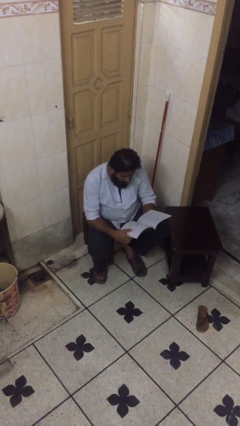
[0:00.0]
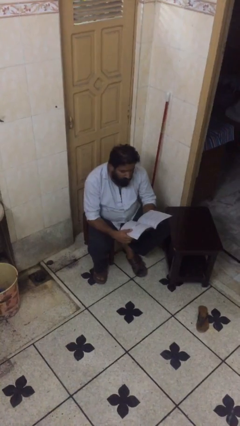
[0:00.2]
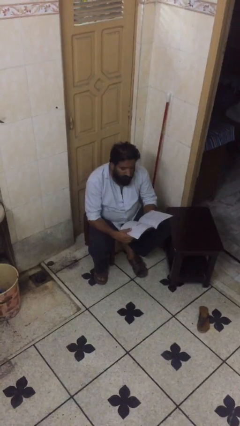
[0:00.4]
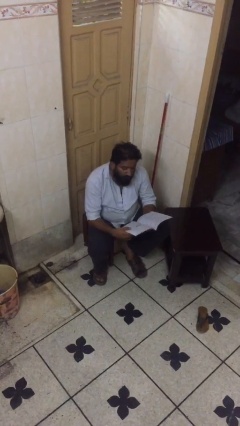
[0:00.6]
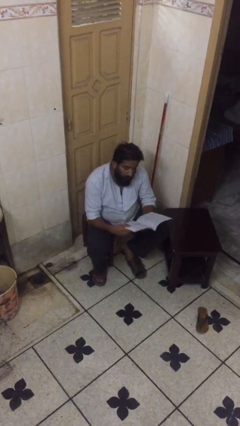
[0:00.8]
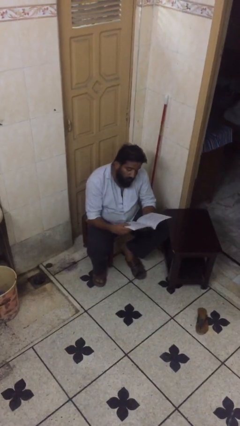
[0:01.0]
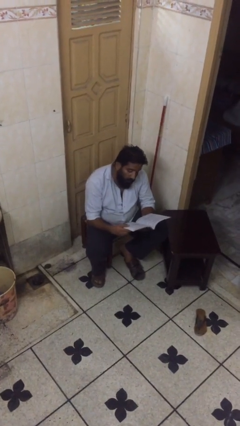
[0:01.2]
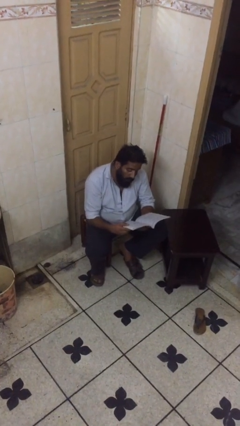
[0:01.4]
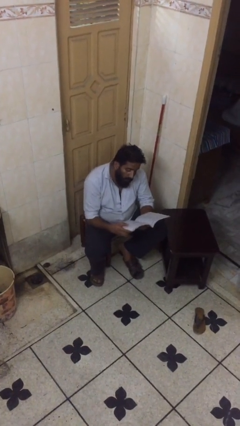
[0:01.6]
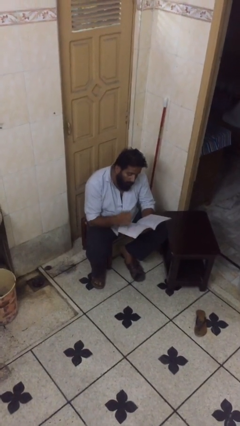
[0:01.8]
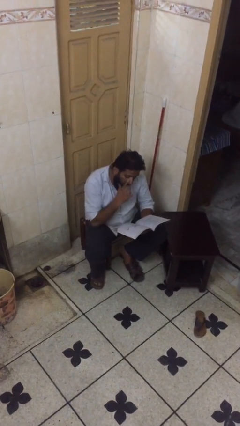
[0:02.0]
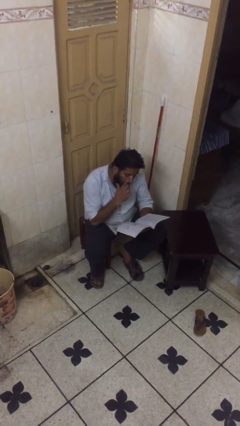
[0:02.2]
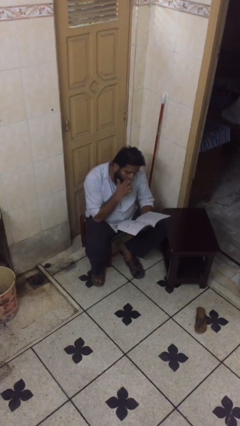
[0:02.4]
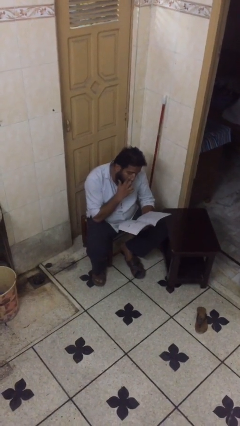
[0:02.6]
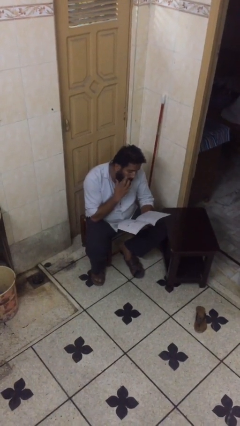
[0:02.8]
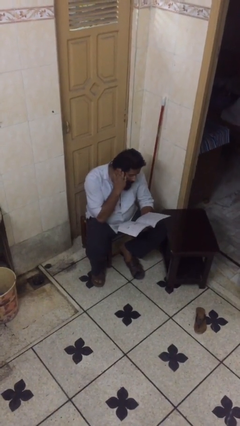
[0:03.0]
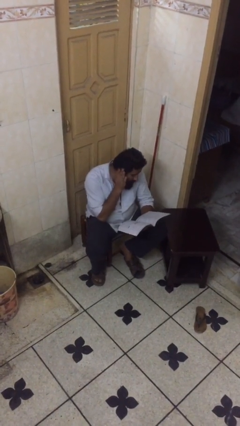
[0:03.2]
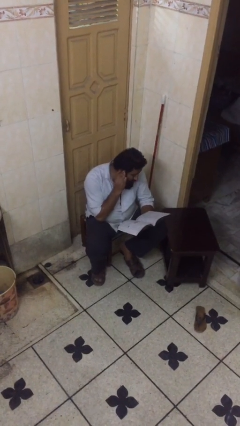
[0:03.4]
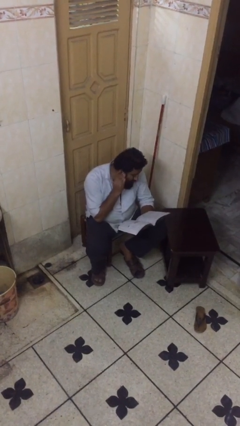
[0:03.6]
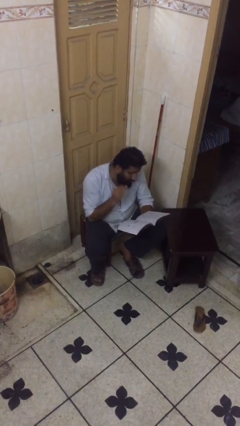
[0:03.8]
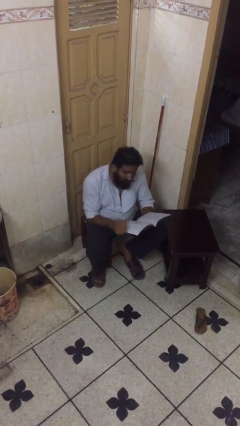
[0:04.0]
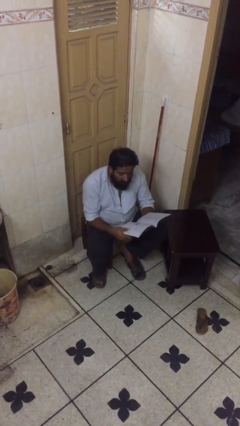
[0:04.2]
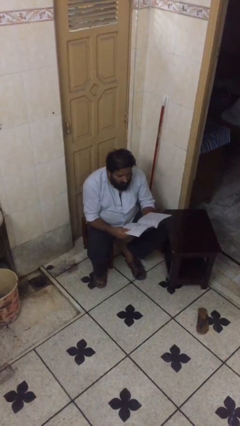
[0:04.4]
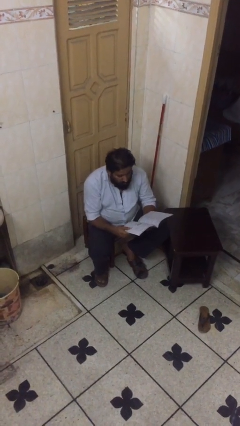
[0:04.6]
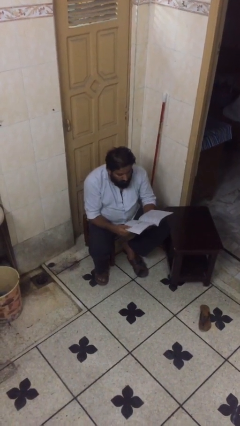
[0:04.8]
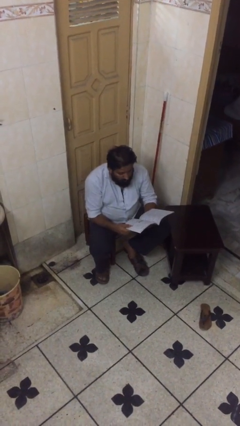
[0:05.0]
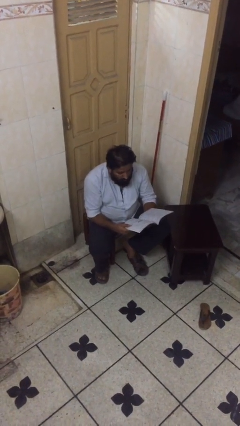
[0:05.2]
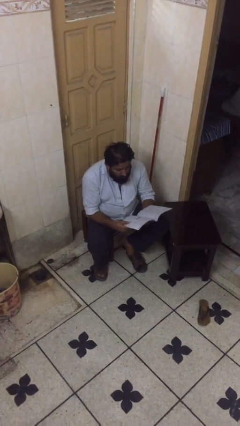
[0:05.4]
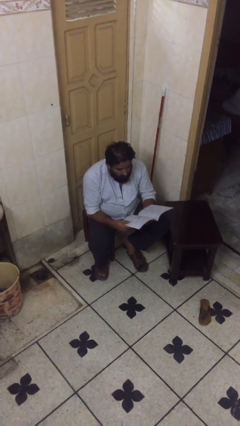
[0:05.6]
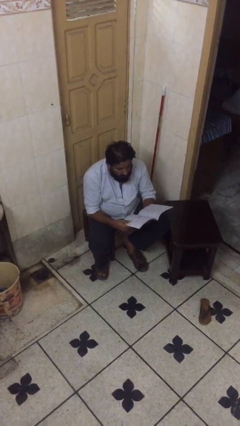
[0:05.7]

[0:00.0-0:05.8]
person reads document

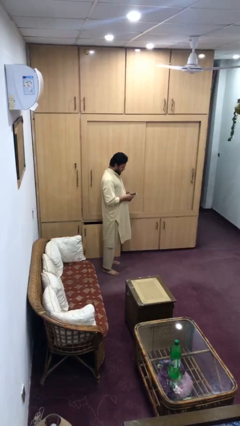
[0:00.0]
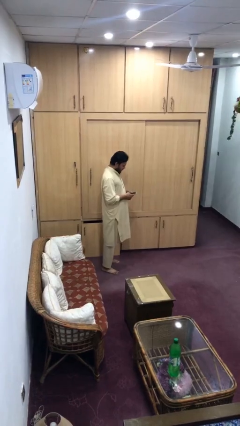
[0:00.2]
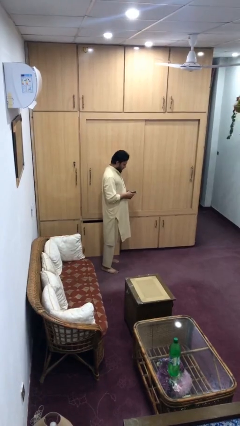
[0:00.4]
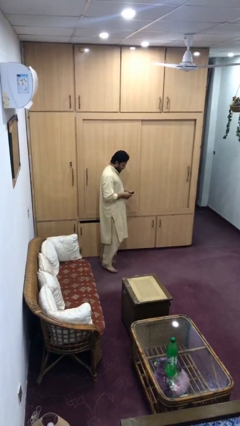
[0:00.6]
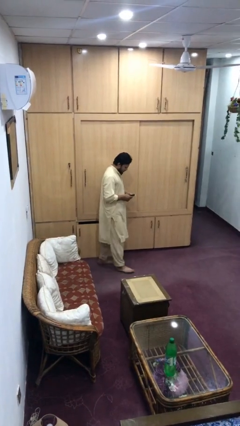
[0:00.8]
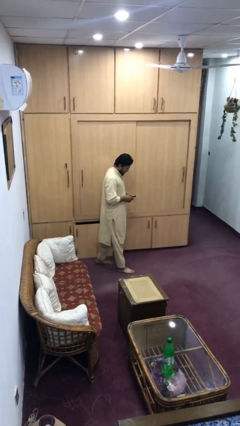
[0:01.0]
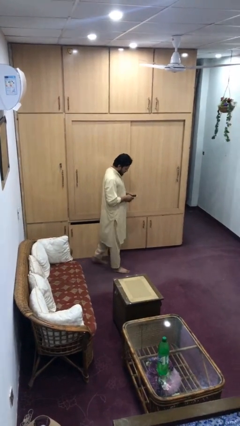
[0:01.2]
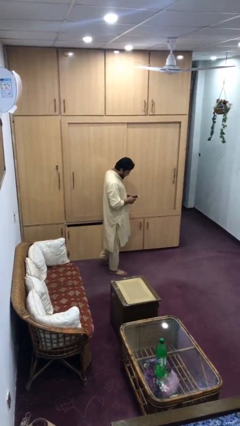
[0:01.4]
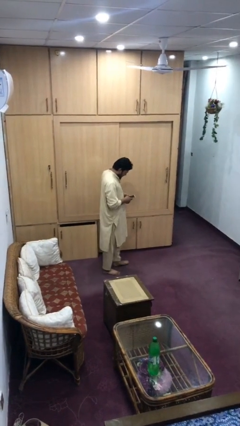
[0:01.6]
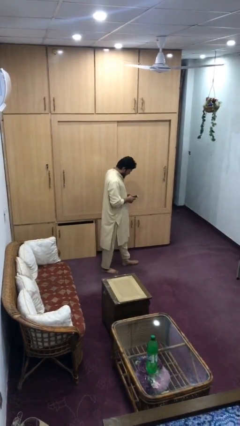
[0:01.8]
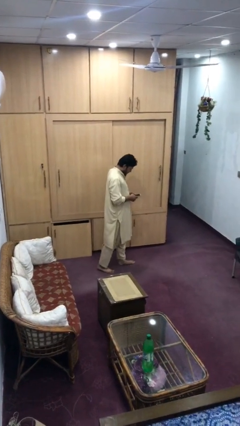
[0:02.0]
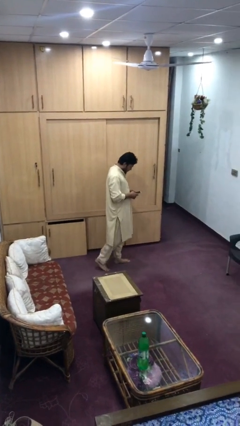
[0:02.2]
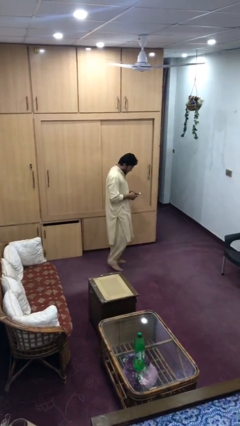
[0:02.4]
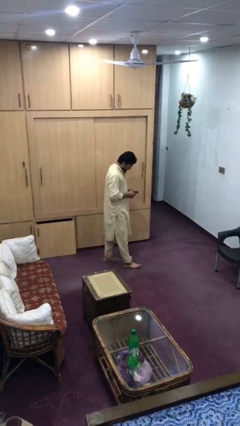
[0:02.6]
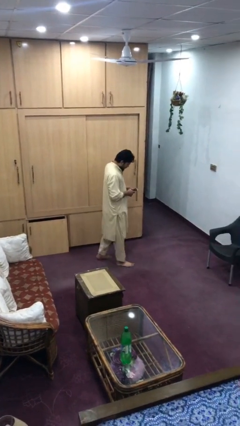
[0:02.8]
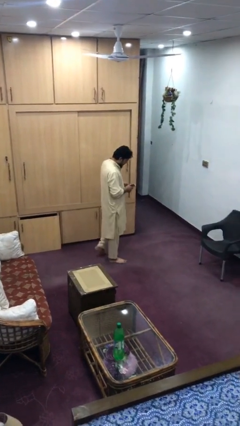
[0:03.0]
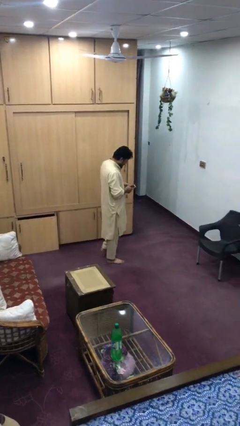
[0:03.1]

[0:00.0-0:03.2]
person texts on phone

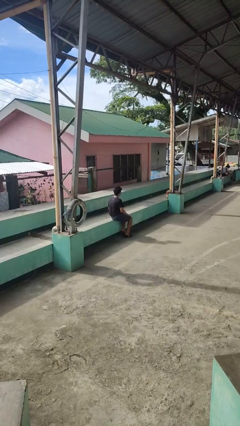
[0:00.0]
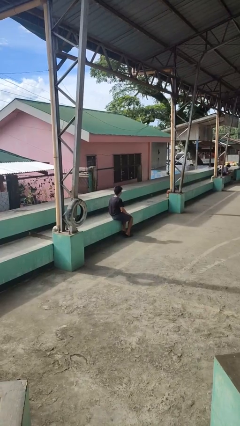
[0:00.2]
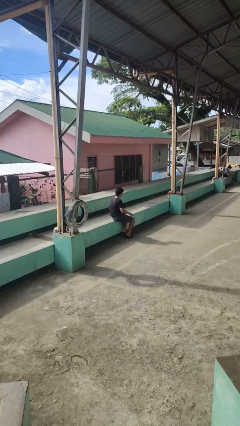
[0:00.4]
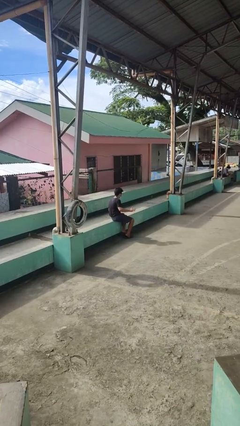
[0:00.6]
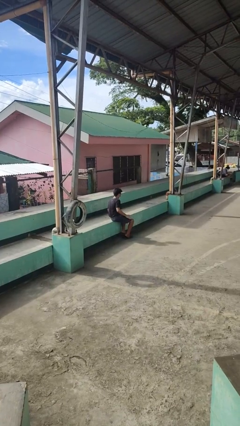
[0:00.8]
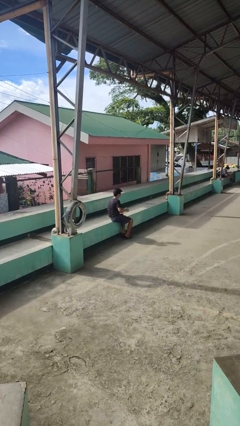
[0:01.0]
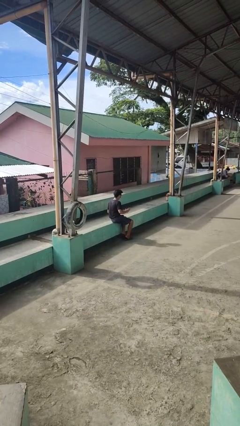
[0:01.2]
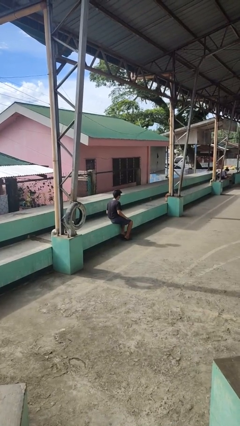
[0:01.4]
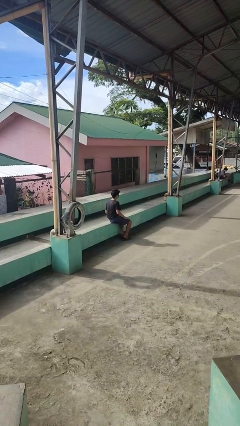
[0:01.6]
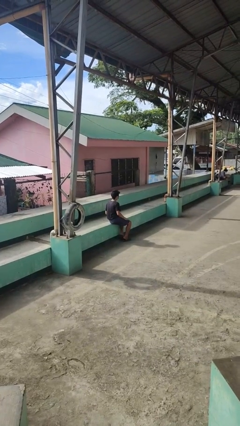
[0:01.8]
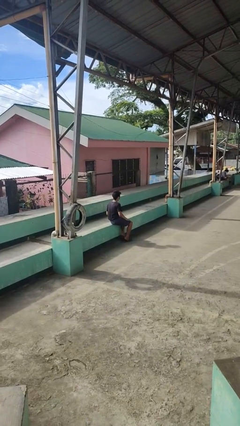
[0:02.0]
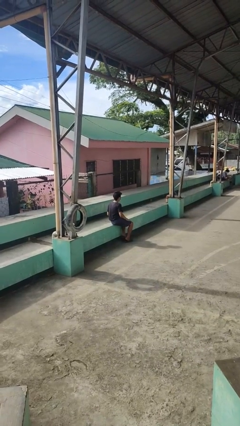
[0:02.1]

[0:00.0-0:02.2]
person slaps hands on thighs

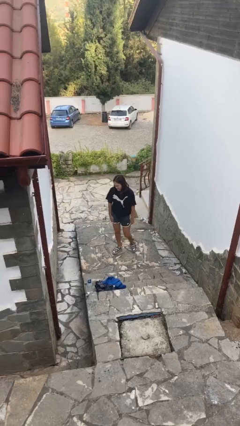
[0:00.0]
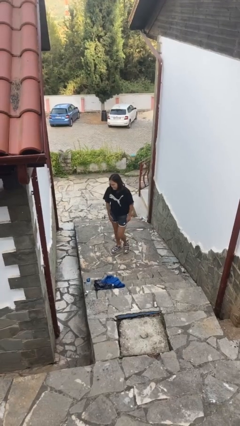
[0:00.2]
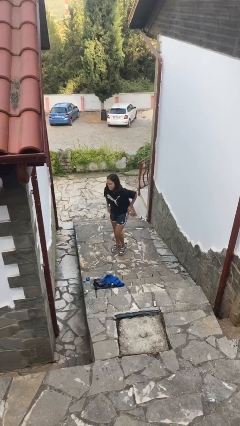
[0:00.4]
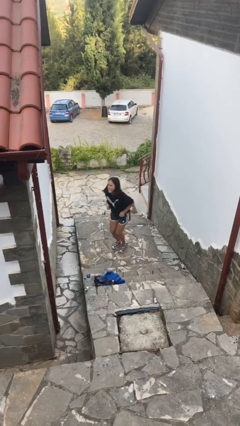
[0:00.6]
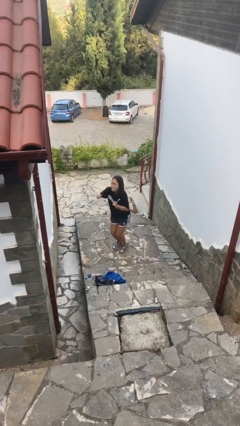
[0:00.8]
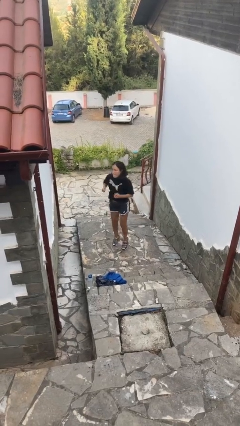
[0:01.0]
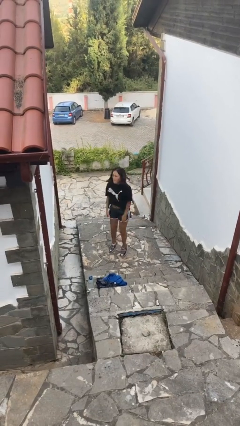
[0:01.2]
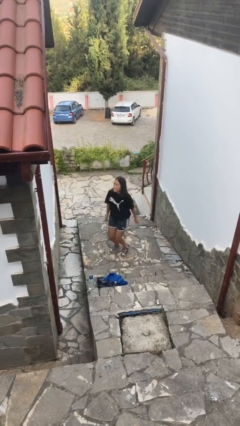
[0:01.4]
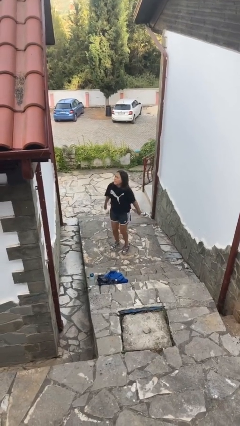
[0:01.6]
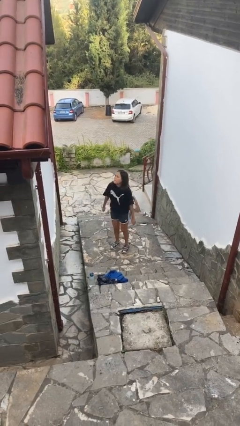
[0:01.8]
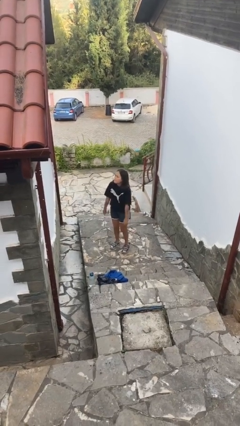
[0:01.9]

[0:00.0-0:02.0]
person jumps

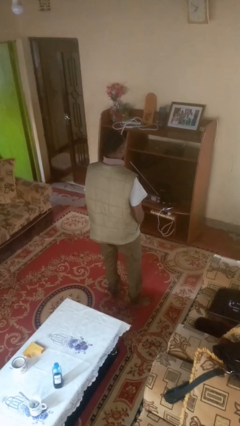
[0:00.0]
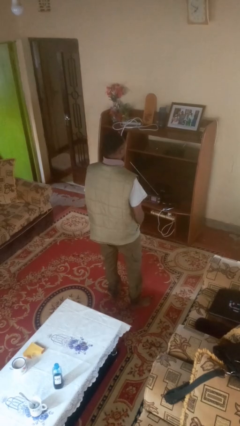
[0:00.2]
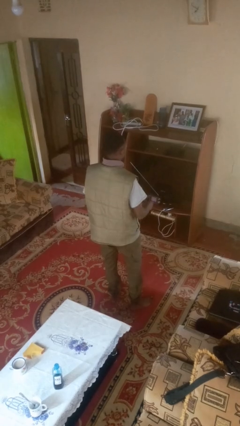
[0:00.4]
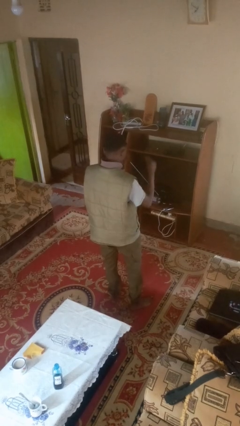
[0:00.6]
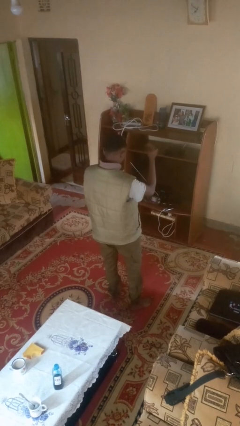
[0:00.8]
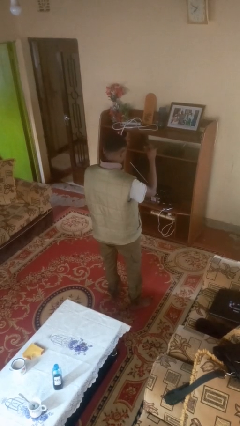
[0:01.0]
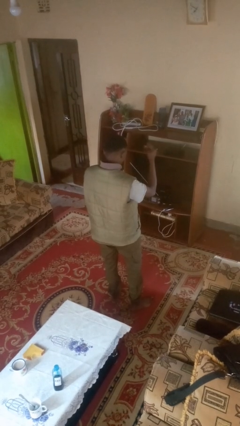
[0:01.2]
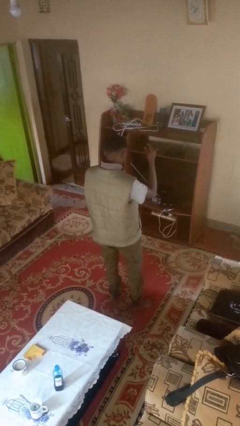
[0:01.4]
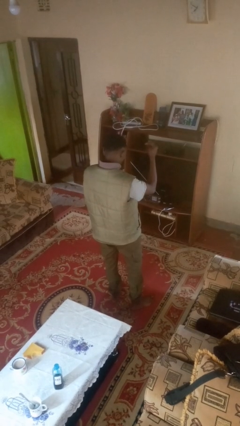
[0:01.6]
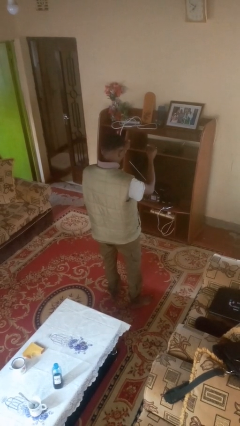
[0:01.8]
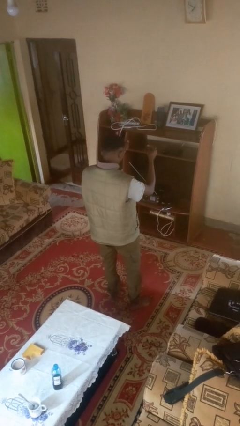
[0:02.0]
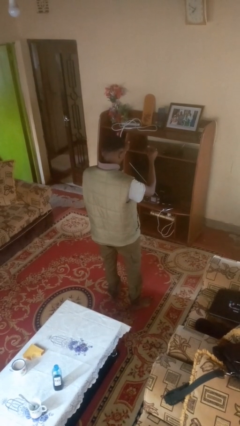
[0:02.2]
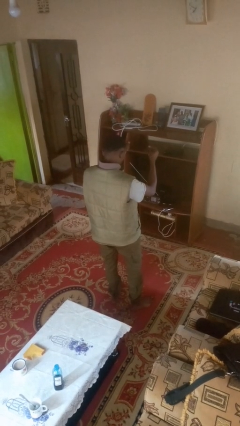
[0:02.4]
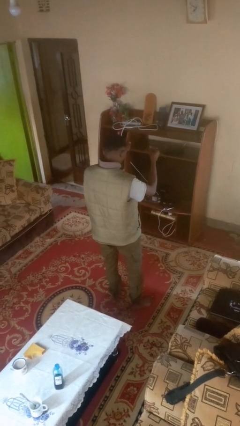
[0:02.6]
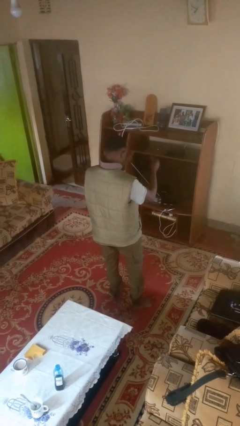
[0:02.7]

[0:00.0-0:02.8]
person snaps fingers

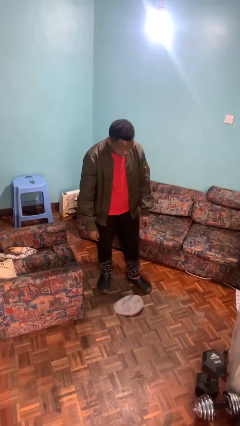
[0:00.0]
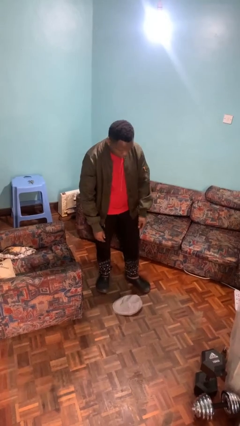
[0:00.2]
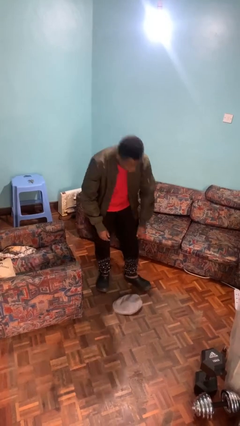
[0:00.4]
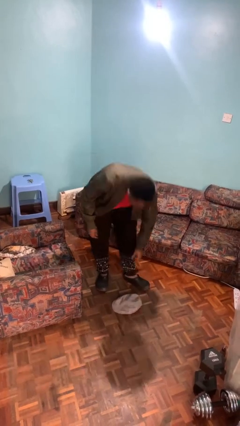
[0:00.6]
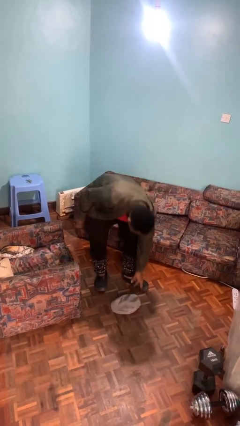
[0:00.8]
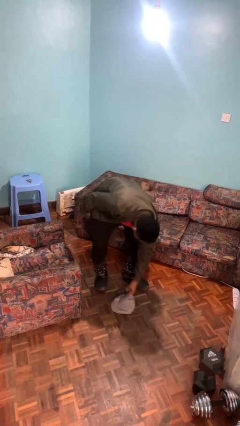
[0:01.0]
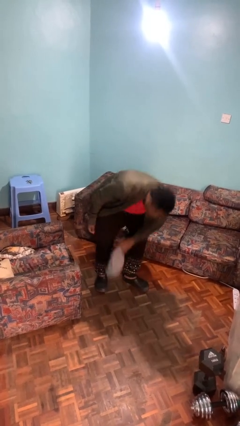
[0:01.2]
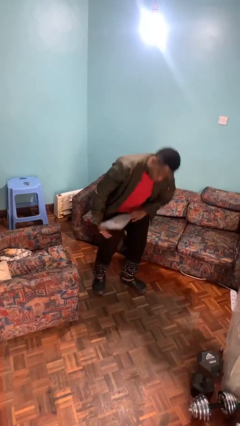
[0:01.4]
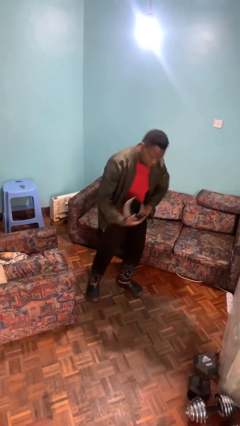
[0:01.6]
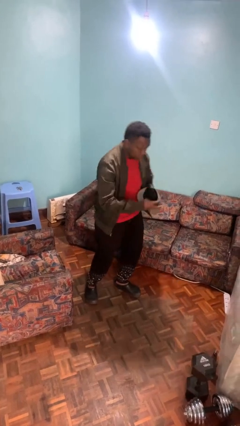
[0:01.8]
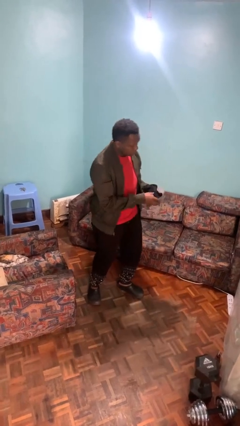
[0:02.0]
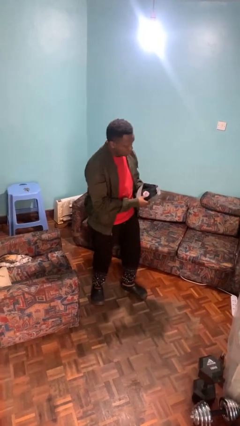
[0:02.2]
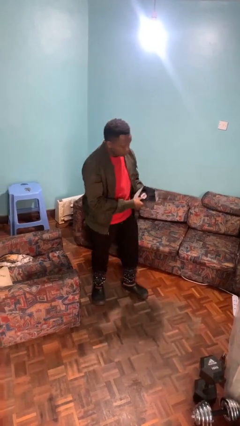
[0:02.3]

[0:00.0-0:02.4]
person picks up object from floor
